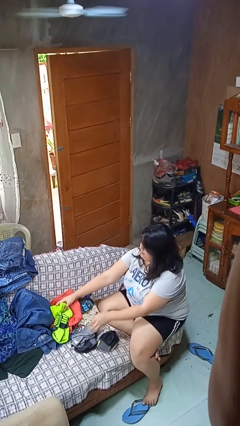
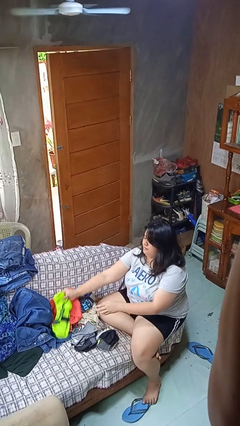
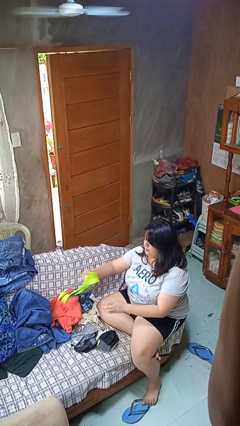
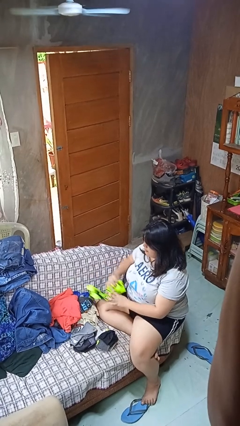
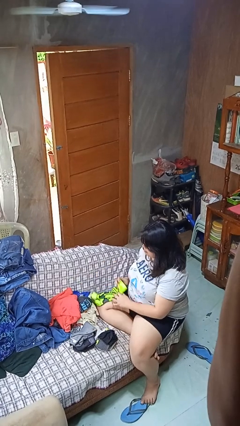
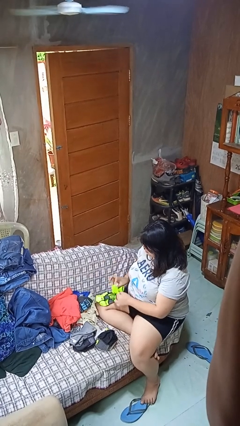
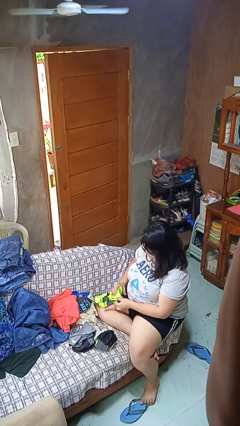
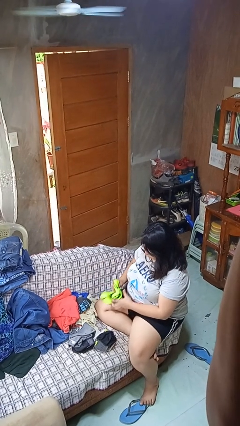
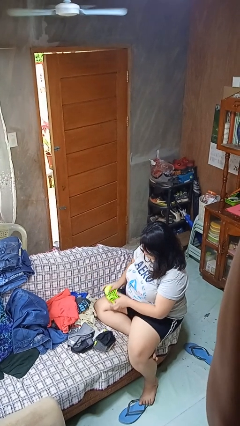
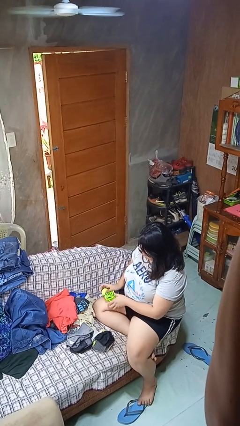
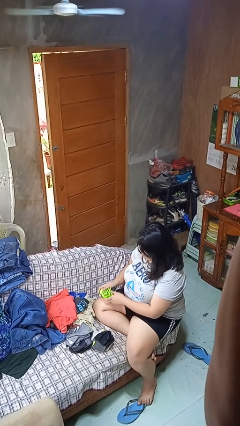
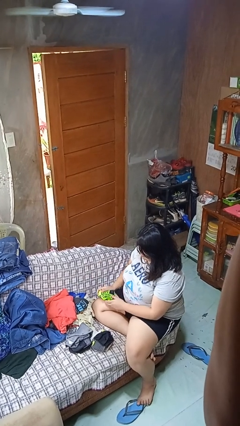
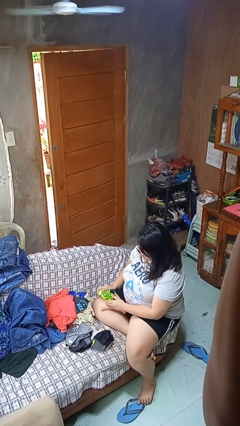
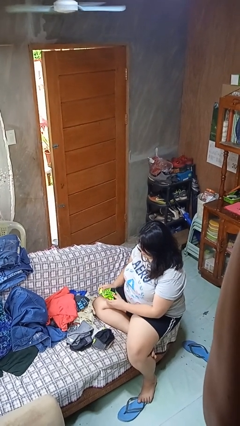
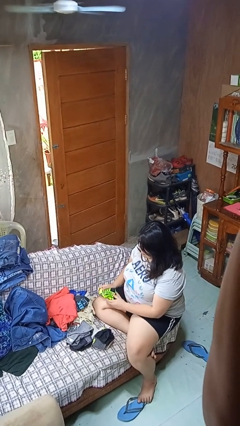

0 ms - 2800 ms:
person folds socks

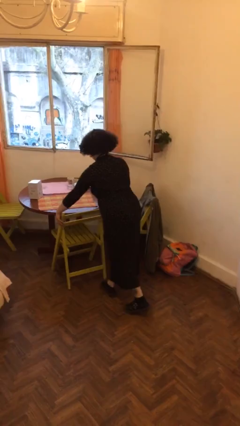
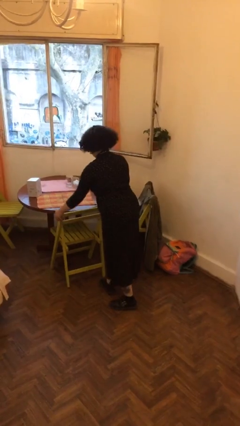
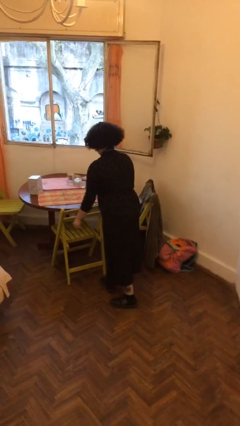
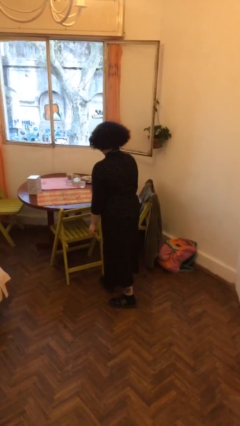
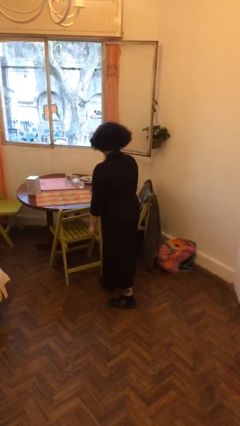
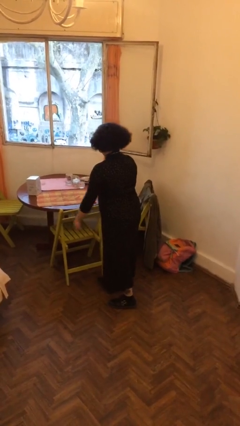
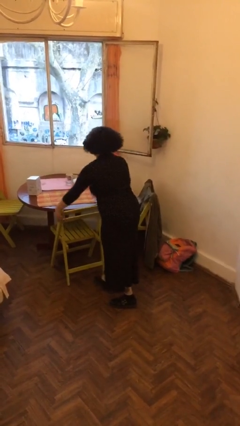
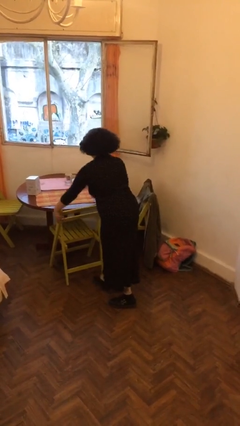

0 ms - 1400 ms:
person pulls out chair

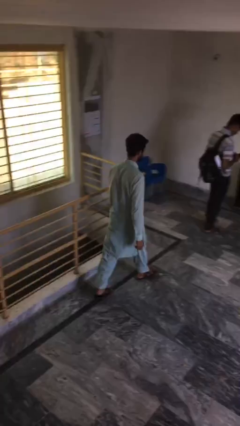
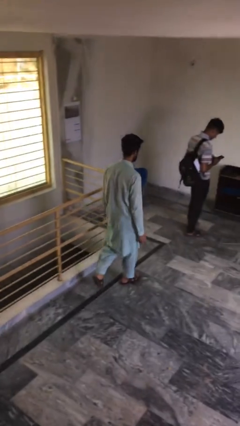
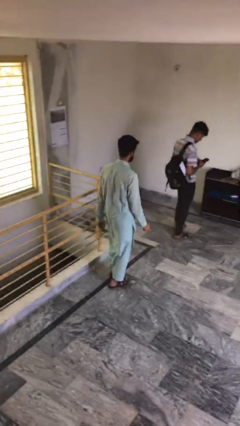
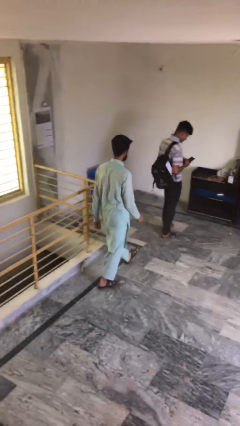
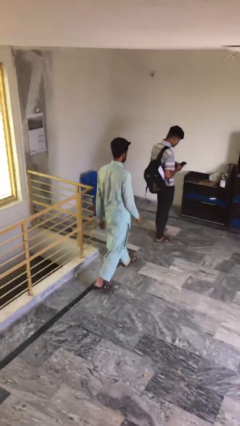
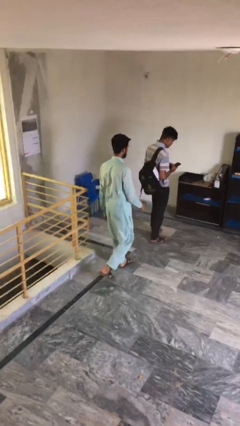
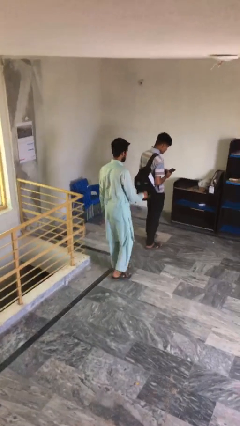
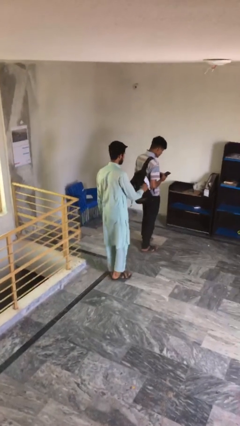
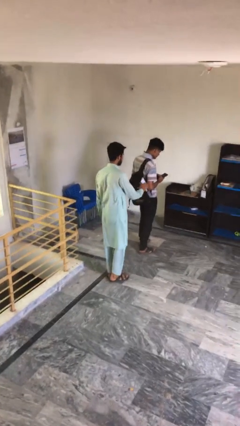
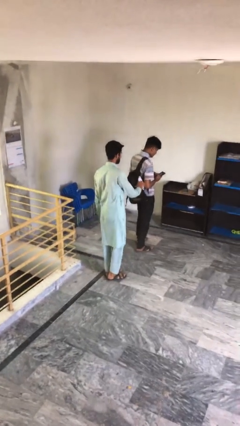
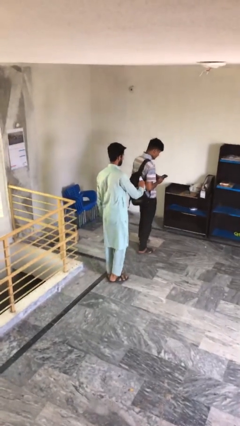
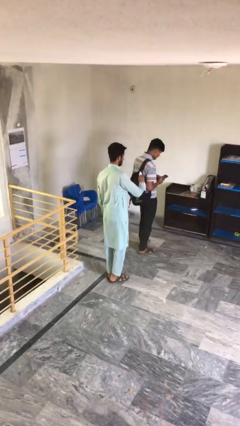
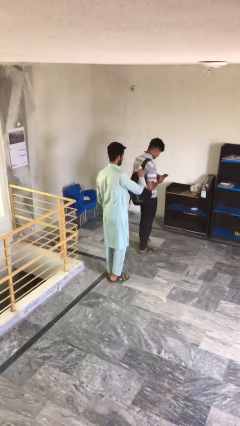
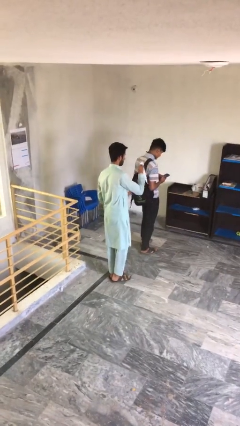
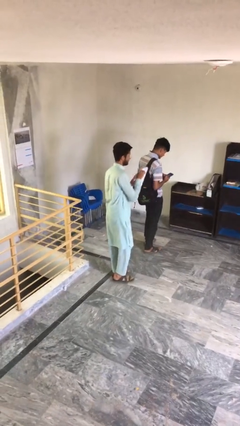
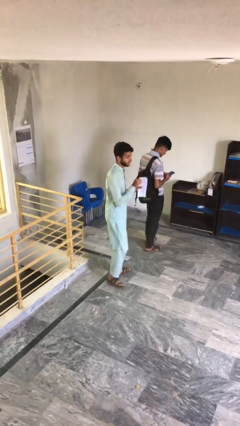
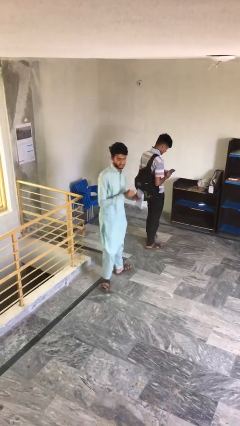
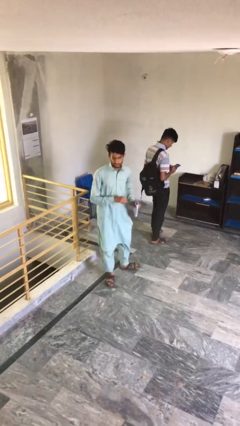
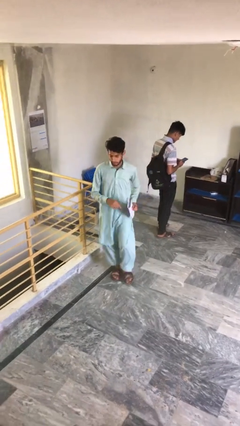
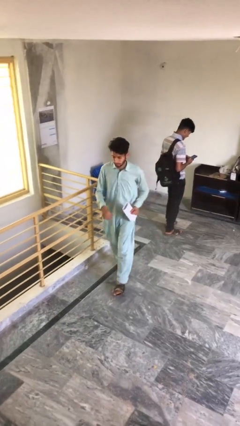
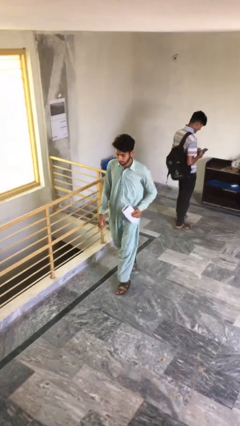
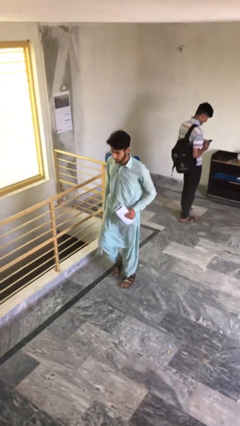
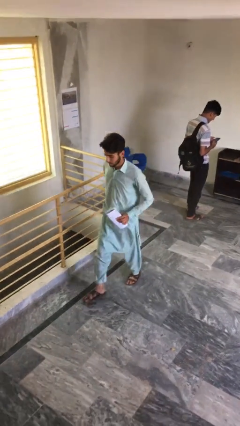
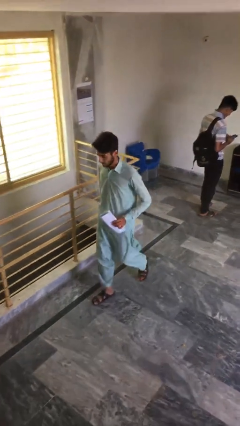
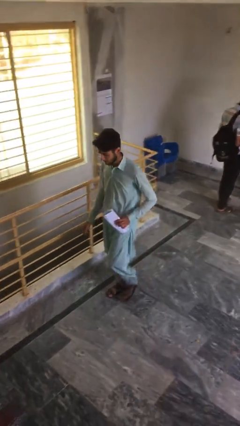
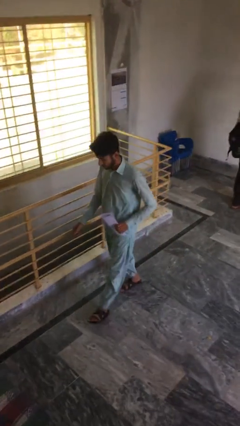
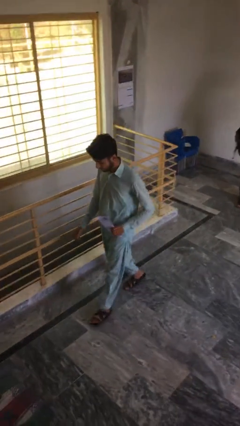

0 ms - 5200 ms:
person steals object from person

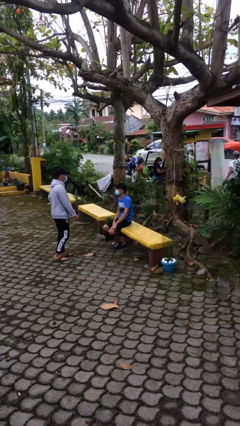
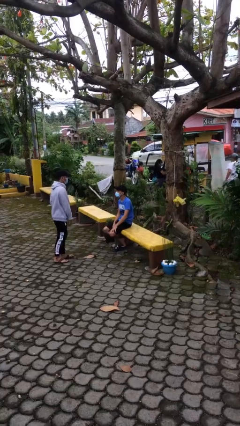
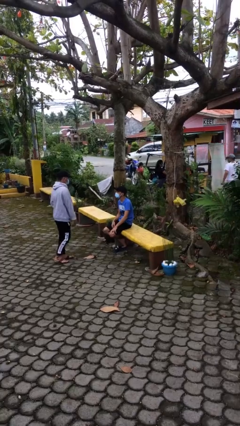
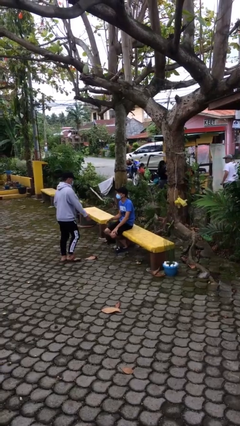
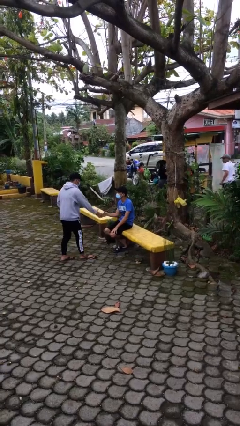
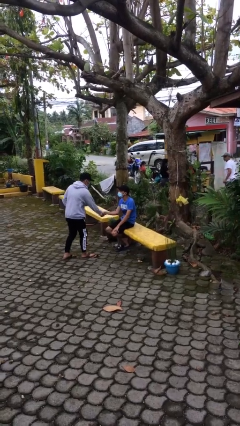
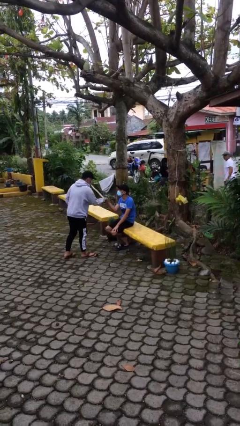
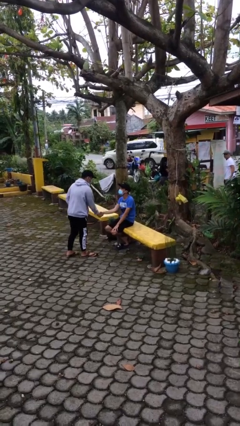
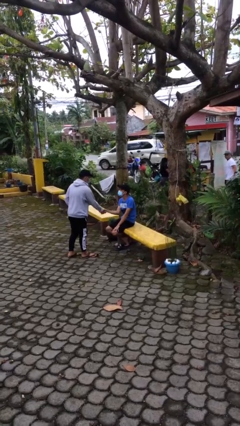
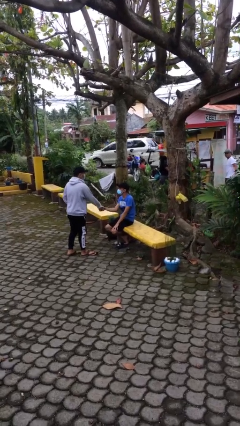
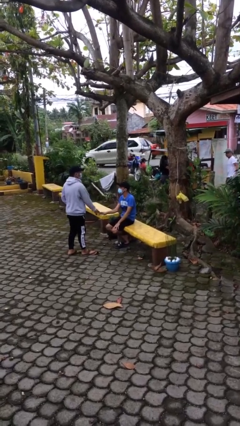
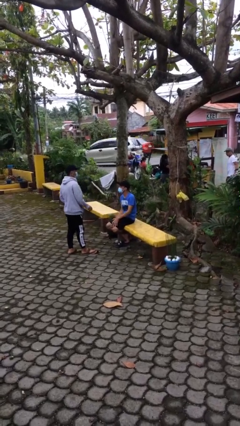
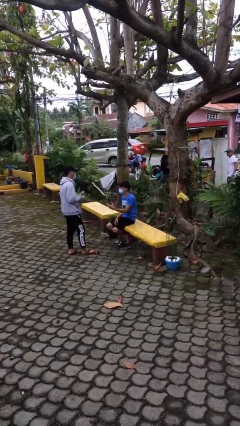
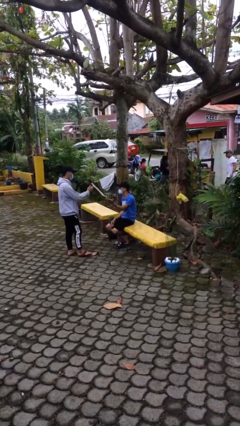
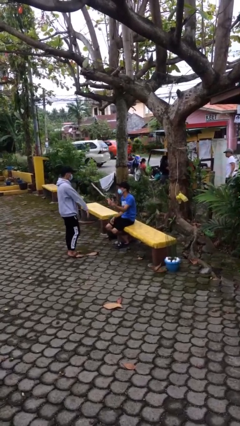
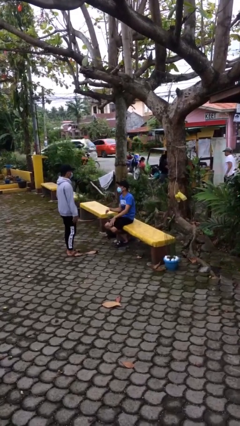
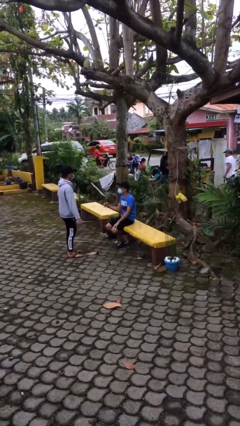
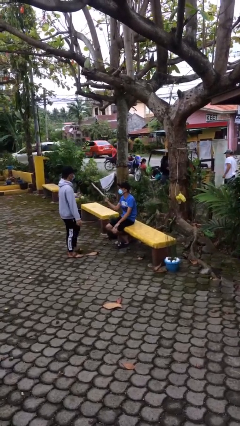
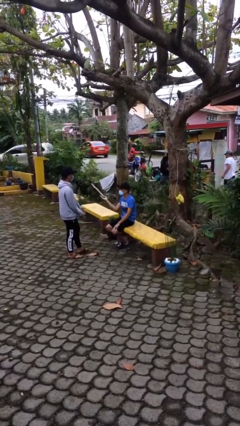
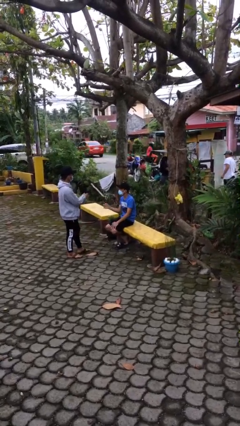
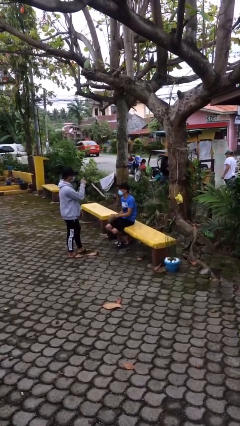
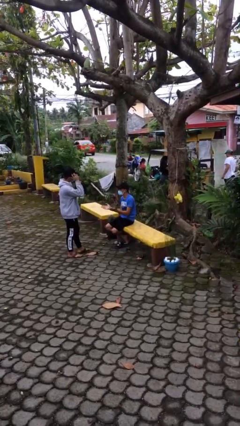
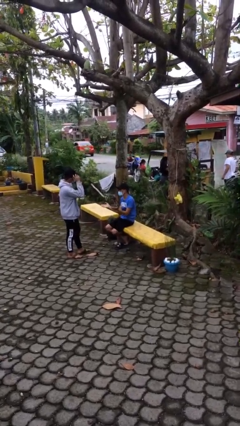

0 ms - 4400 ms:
person shakes hand

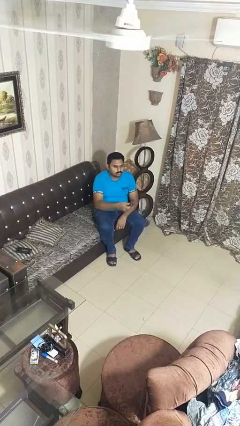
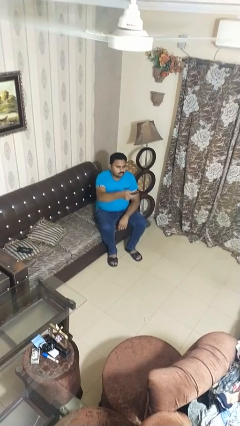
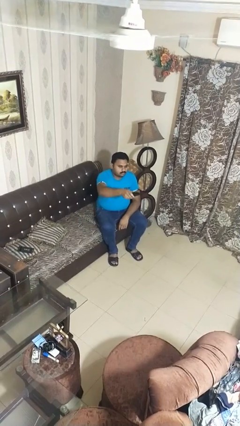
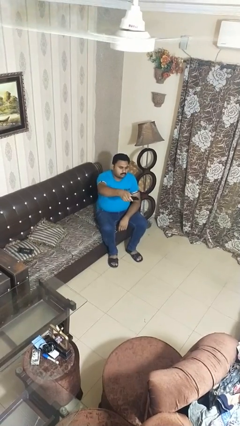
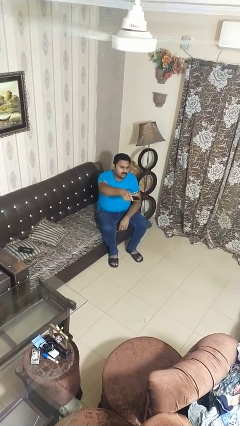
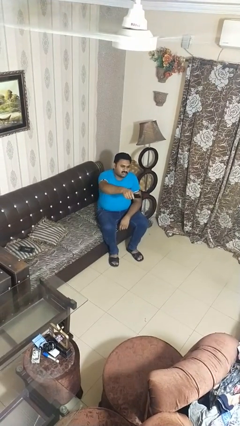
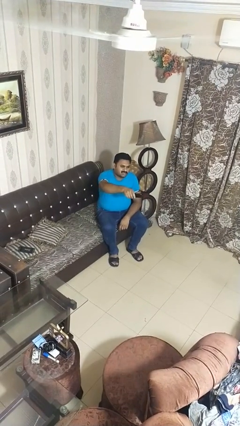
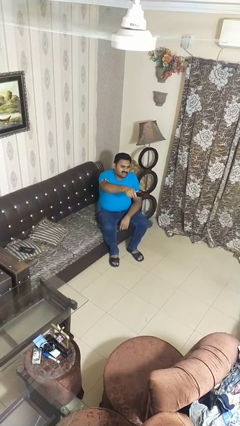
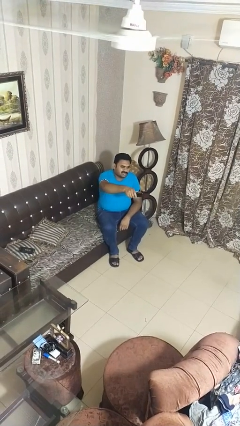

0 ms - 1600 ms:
person uses television remote

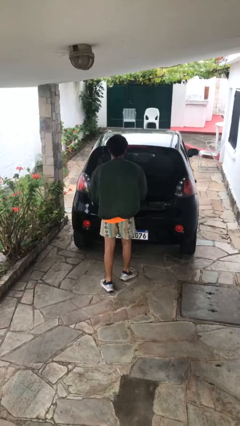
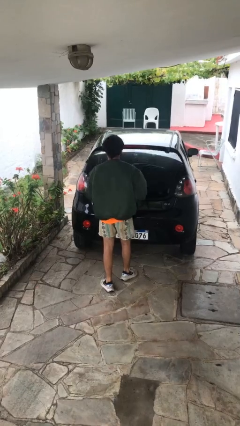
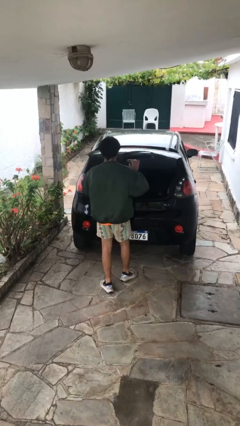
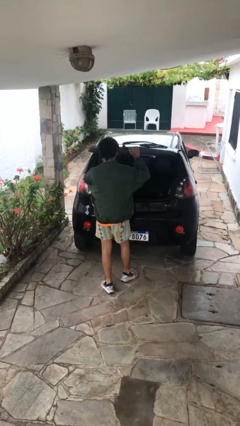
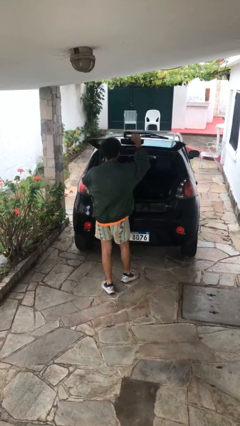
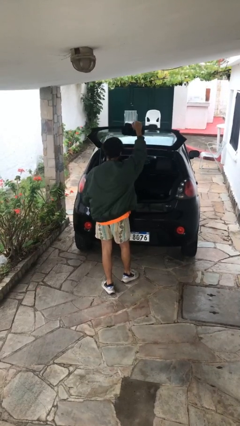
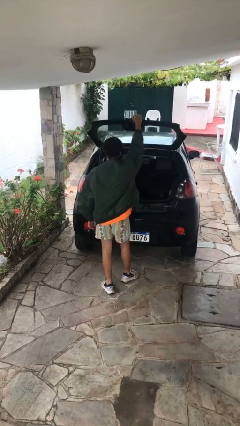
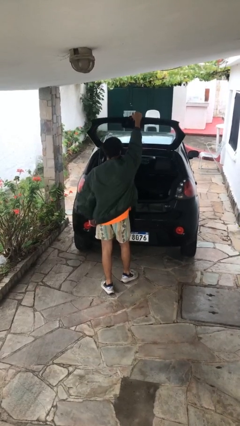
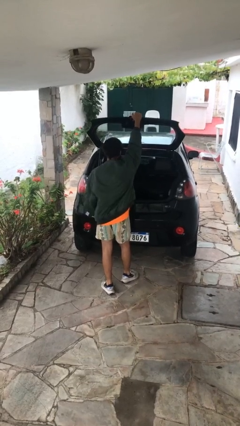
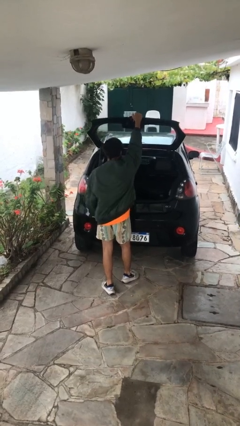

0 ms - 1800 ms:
person opens car trunk

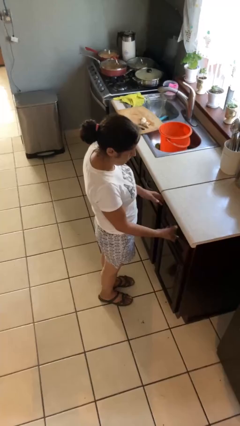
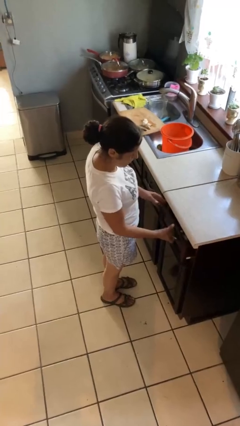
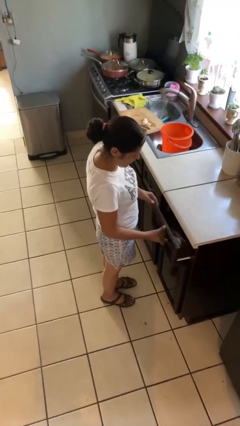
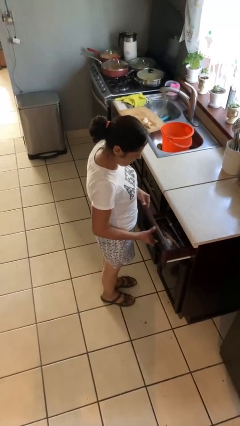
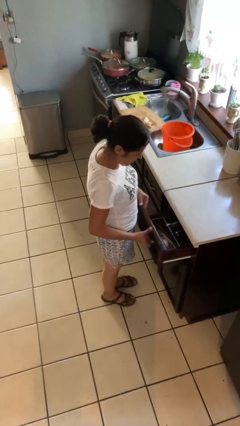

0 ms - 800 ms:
person opens kitchen drawer
